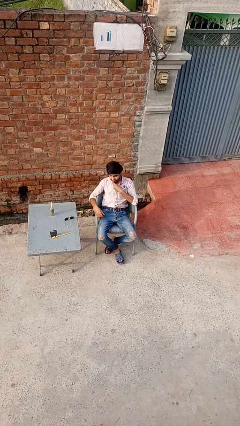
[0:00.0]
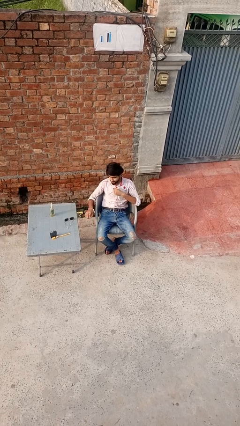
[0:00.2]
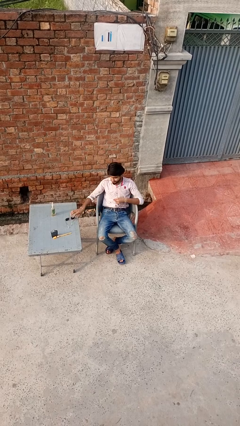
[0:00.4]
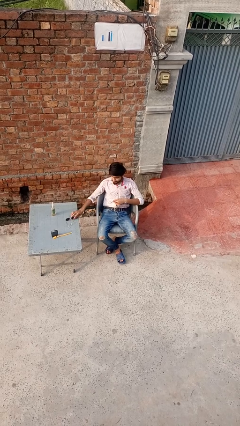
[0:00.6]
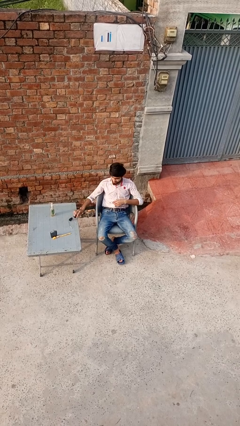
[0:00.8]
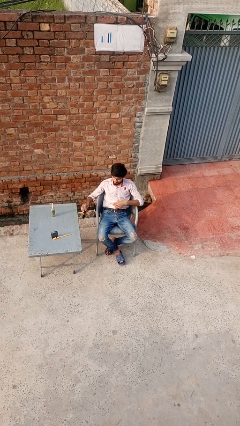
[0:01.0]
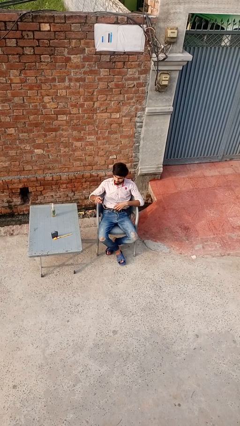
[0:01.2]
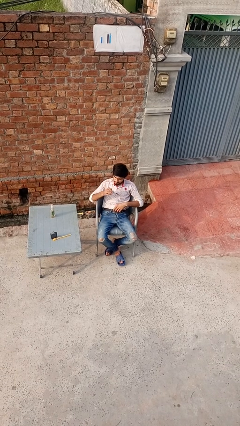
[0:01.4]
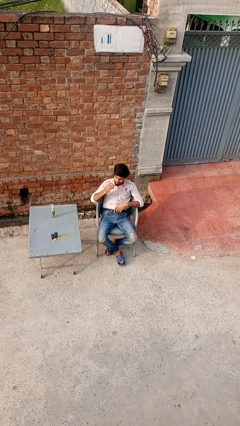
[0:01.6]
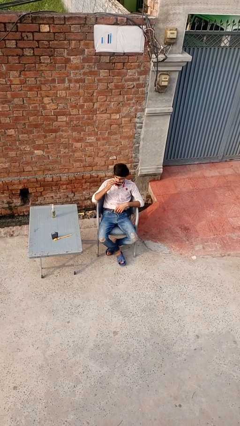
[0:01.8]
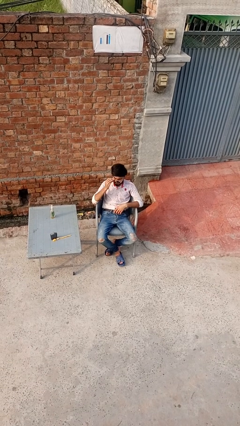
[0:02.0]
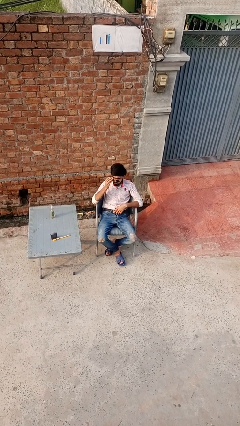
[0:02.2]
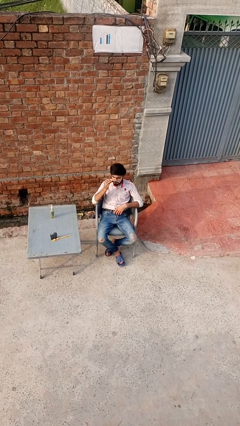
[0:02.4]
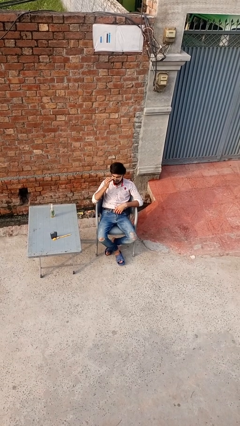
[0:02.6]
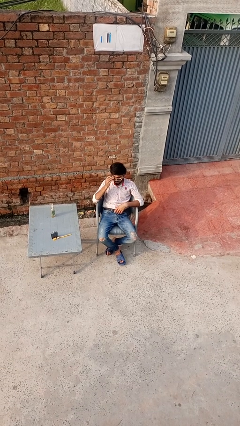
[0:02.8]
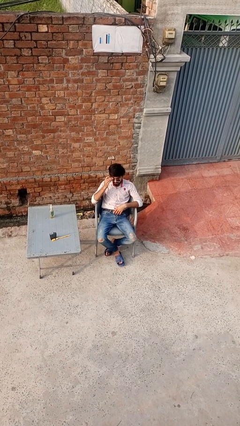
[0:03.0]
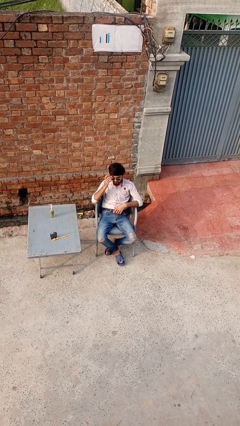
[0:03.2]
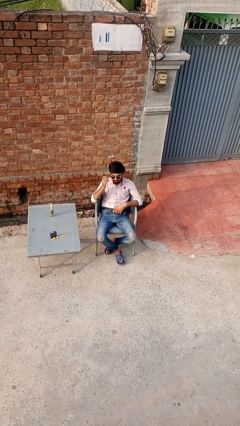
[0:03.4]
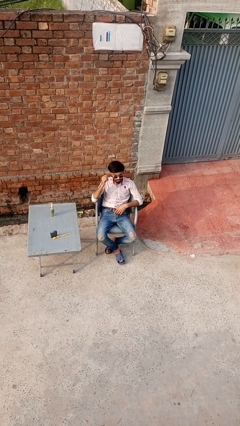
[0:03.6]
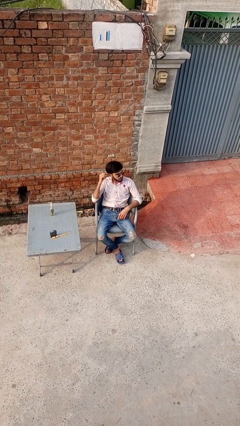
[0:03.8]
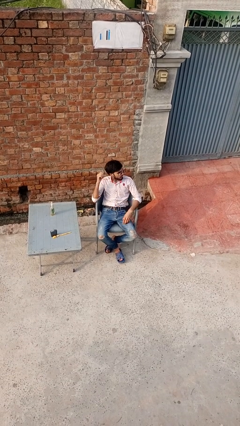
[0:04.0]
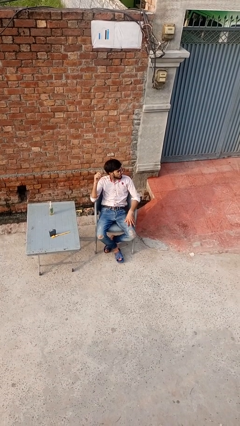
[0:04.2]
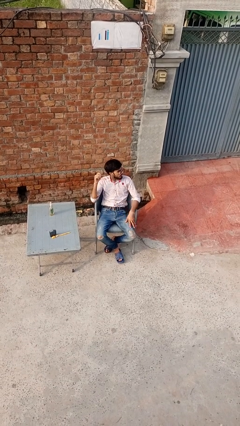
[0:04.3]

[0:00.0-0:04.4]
person puts on sunglasses

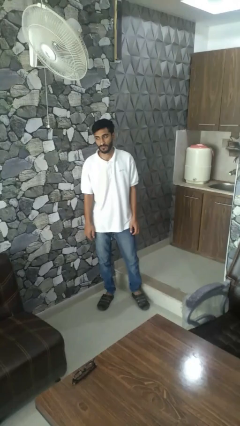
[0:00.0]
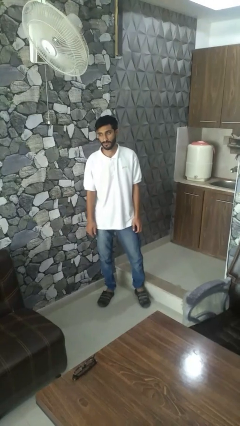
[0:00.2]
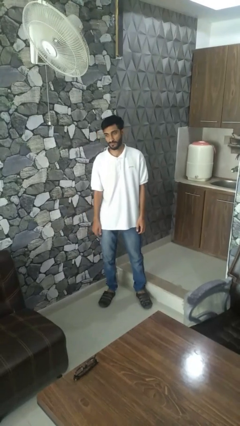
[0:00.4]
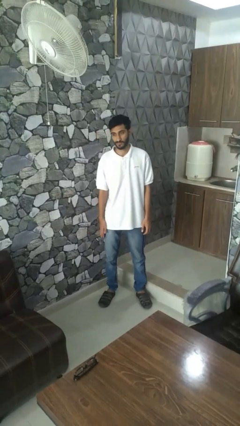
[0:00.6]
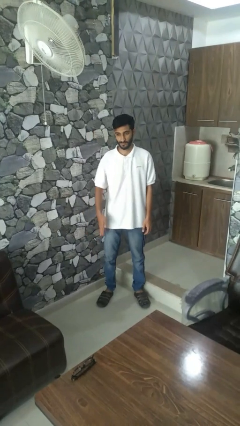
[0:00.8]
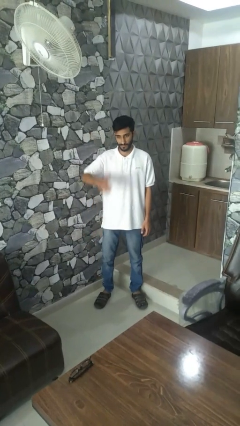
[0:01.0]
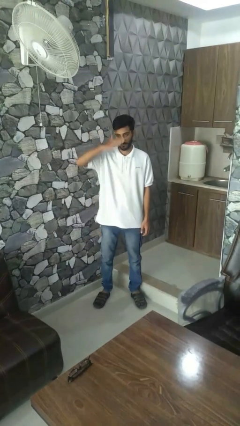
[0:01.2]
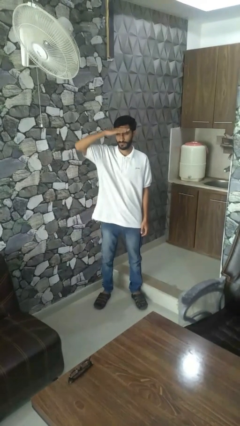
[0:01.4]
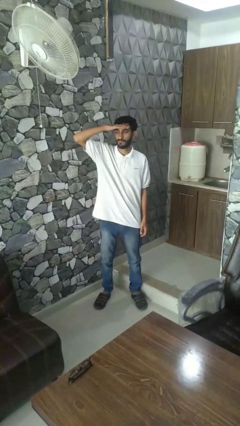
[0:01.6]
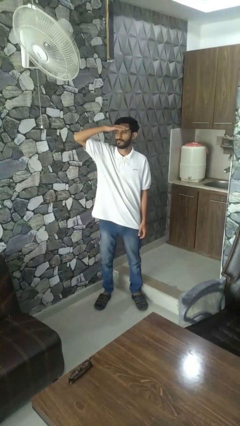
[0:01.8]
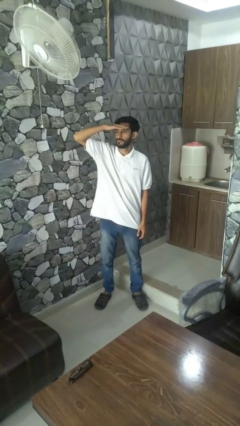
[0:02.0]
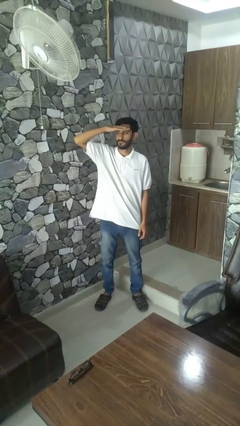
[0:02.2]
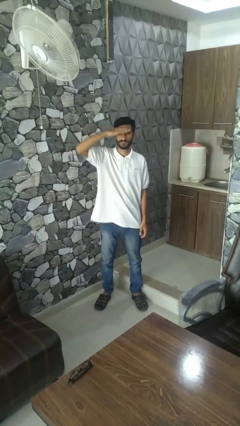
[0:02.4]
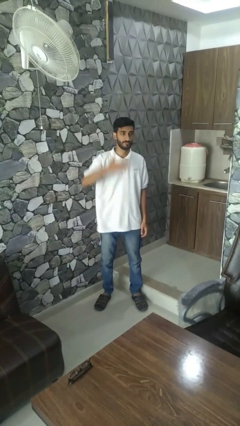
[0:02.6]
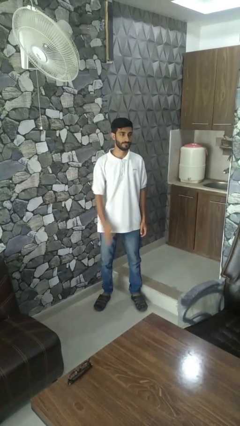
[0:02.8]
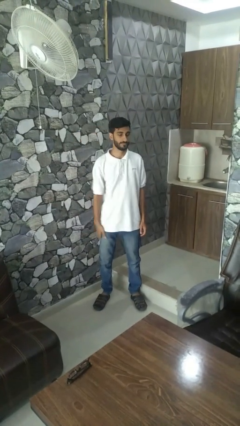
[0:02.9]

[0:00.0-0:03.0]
person shades eyes

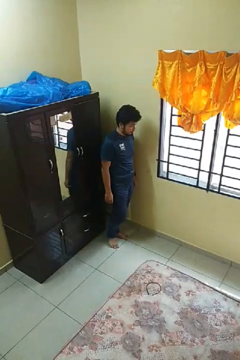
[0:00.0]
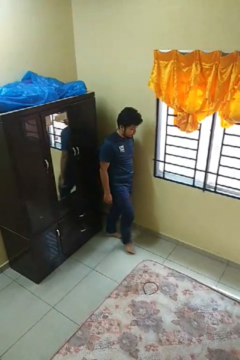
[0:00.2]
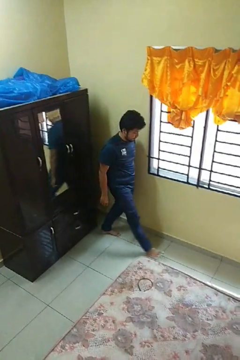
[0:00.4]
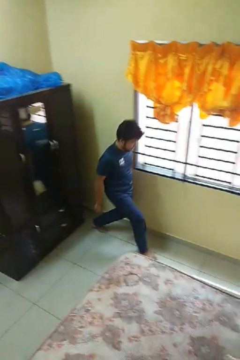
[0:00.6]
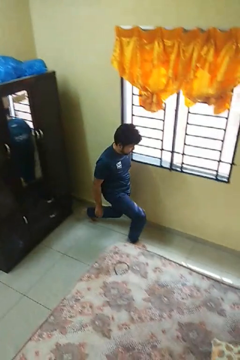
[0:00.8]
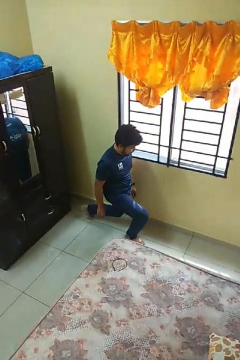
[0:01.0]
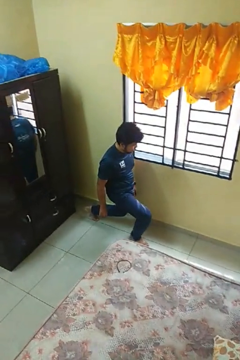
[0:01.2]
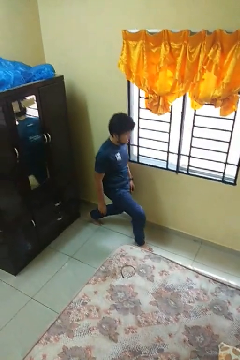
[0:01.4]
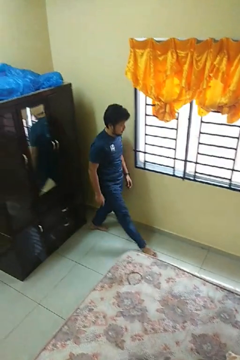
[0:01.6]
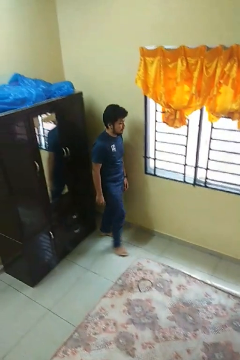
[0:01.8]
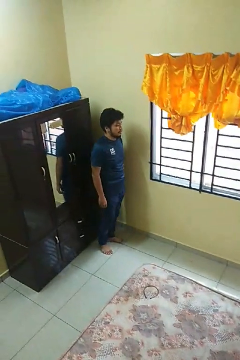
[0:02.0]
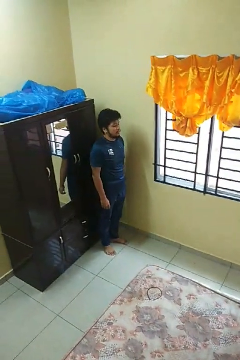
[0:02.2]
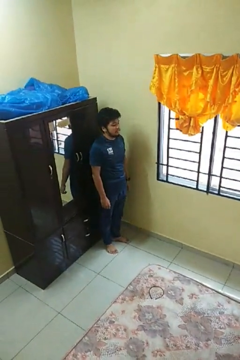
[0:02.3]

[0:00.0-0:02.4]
person exercises with lunges

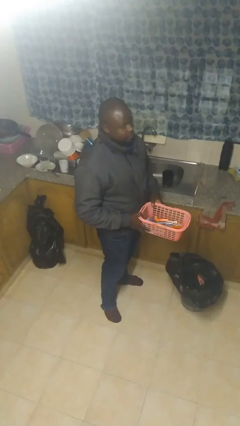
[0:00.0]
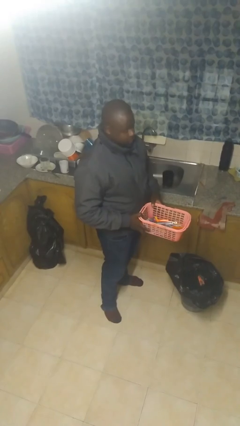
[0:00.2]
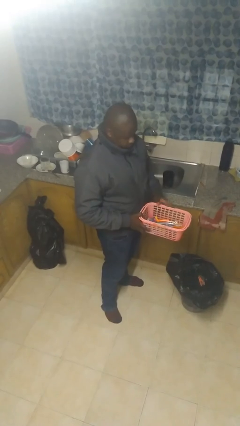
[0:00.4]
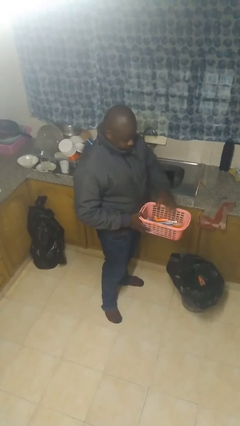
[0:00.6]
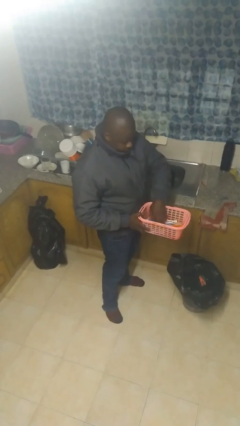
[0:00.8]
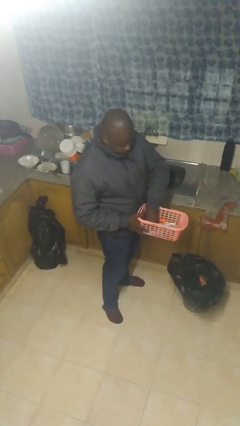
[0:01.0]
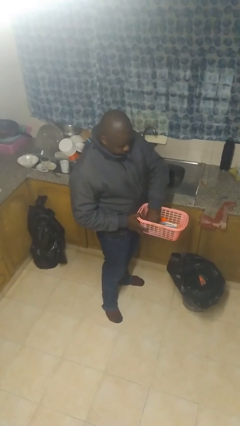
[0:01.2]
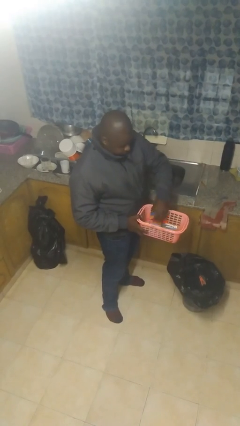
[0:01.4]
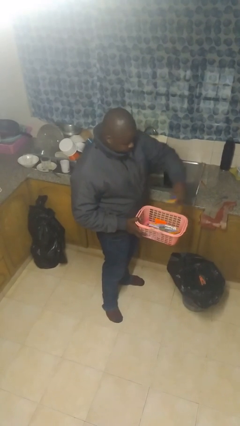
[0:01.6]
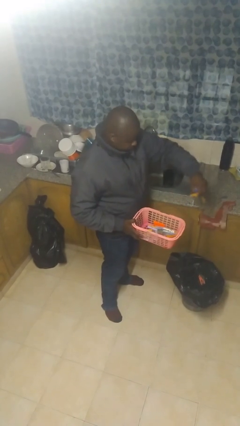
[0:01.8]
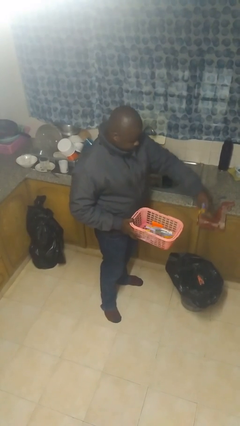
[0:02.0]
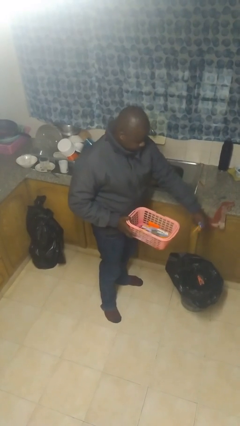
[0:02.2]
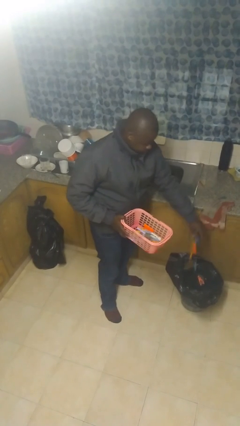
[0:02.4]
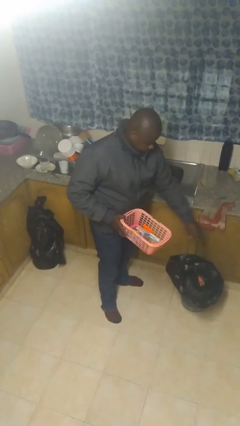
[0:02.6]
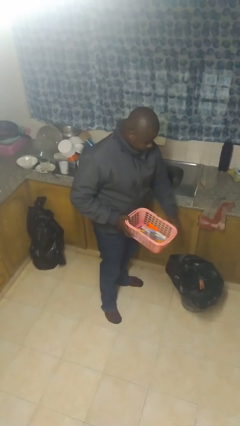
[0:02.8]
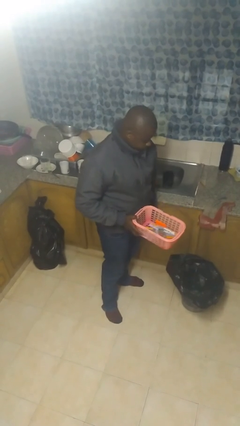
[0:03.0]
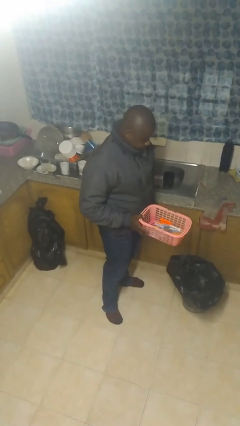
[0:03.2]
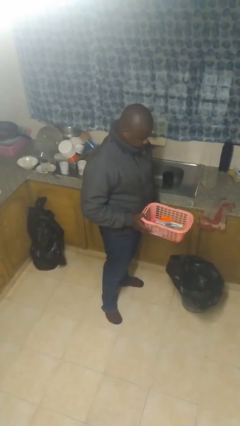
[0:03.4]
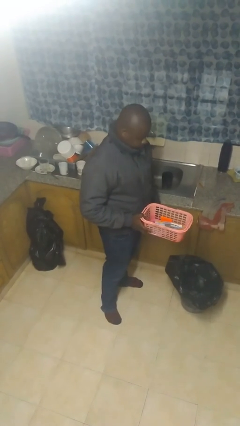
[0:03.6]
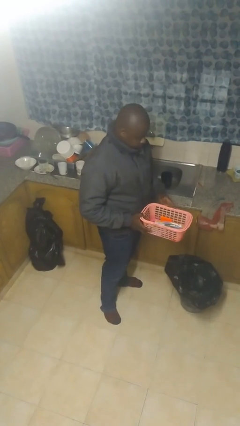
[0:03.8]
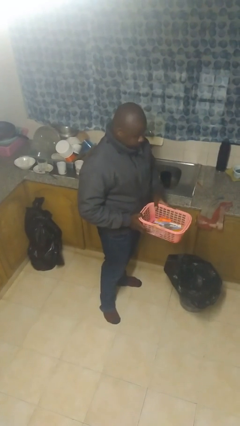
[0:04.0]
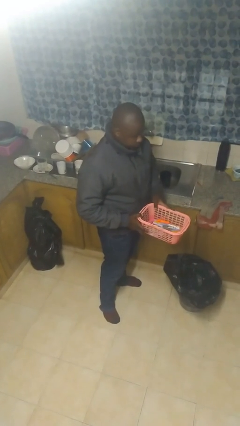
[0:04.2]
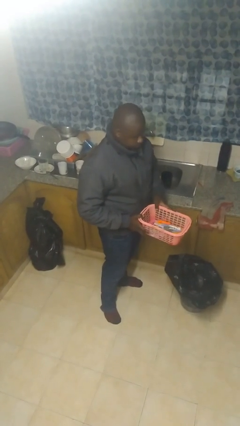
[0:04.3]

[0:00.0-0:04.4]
person discards trash

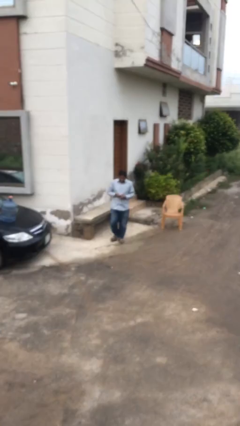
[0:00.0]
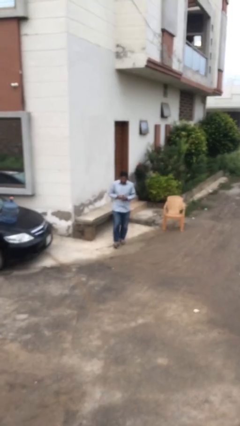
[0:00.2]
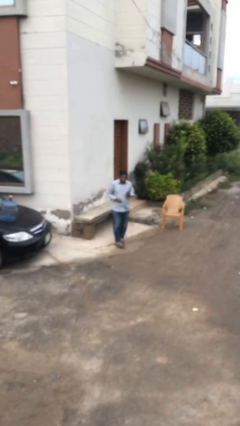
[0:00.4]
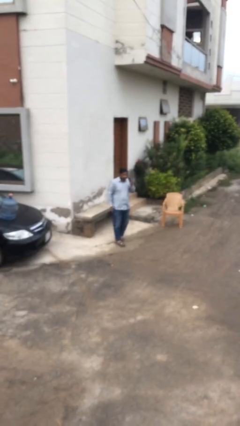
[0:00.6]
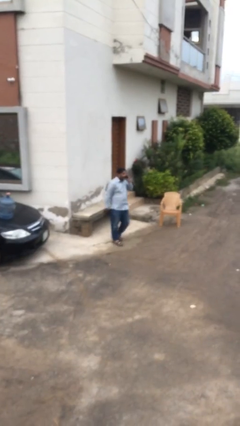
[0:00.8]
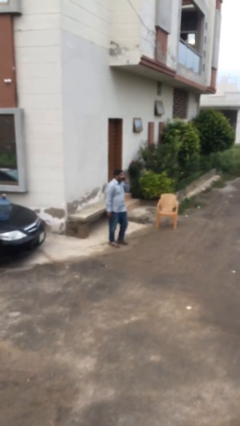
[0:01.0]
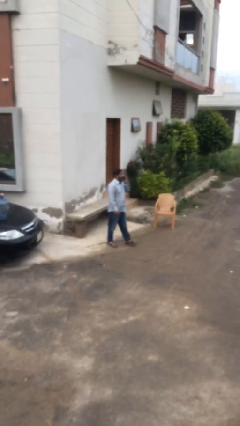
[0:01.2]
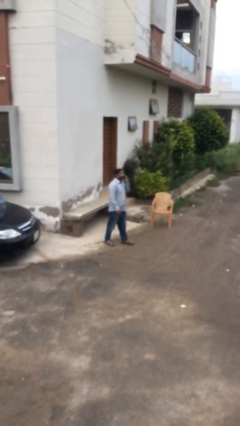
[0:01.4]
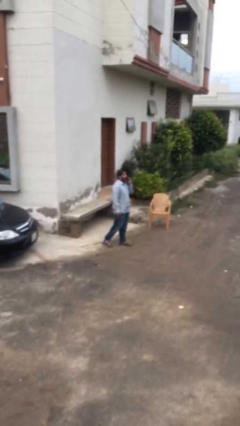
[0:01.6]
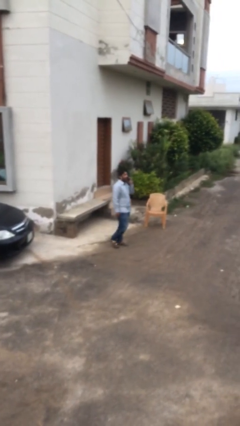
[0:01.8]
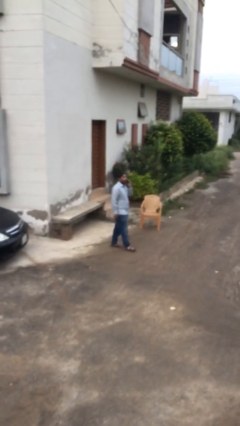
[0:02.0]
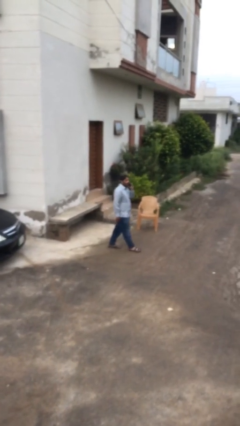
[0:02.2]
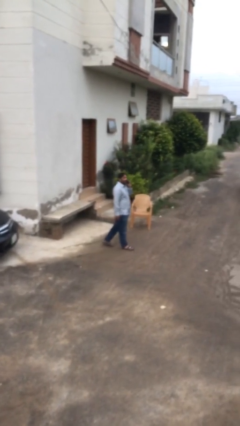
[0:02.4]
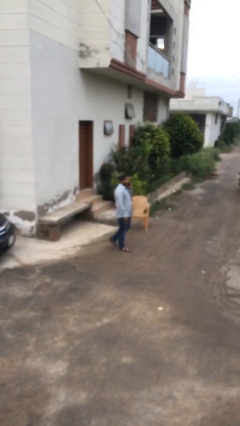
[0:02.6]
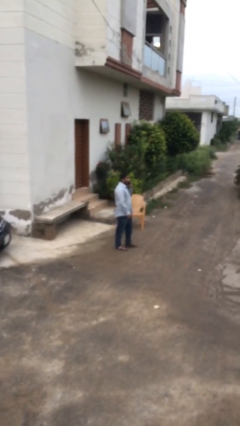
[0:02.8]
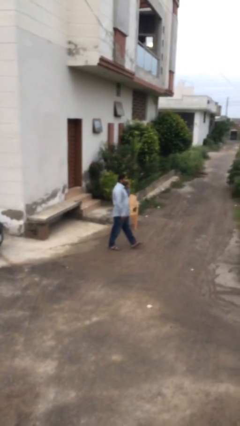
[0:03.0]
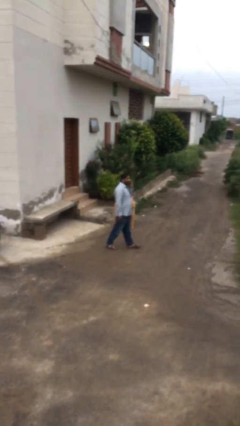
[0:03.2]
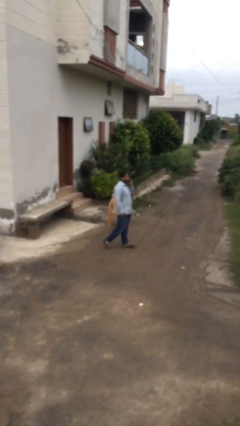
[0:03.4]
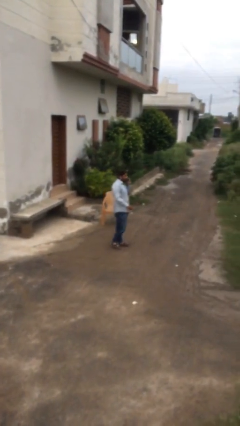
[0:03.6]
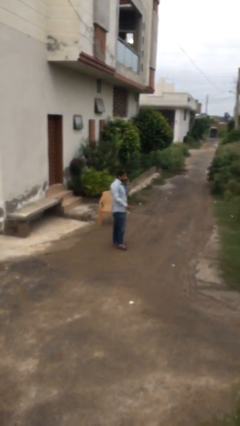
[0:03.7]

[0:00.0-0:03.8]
person talks on phone

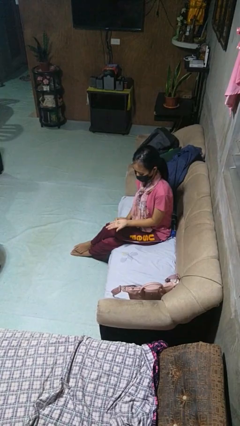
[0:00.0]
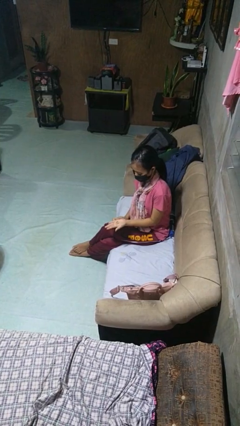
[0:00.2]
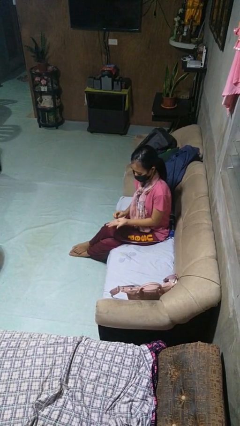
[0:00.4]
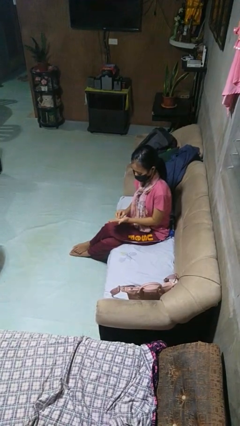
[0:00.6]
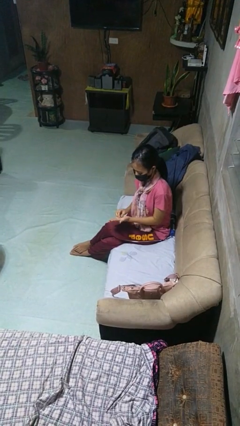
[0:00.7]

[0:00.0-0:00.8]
person puts on ring
